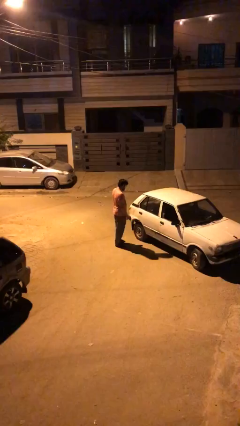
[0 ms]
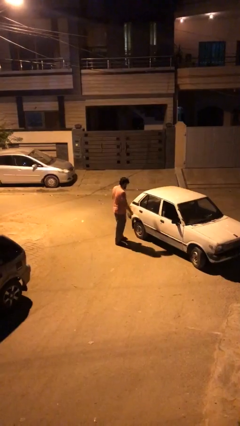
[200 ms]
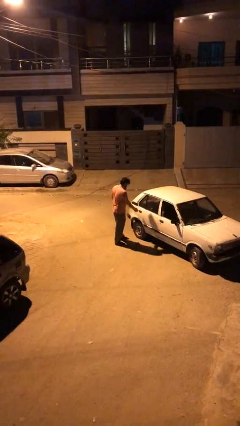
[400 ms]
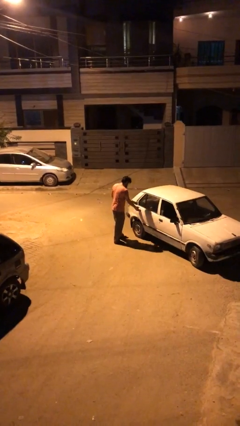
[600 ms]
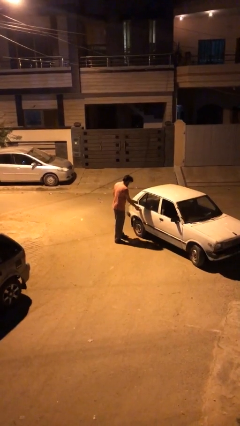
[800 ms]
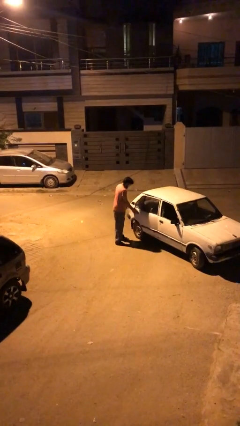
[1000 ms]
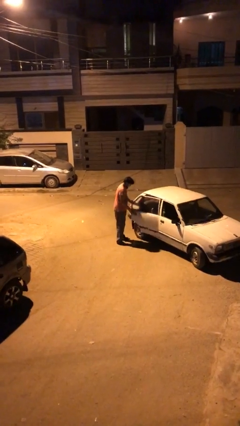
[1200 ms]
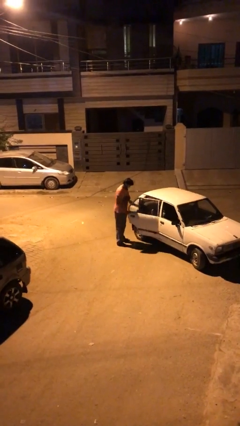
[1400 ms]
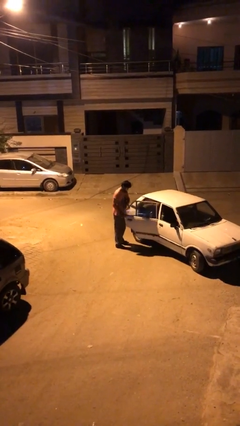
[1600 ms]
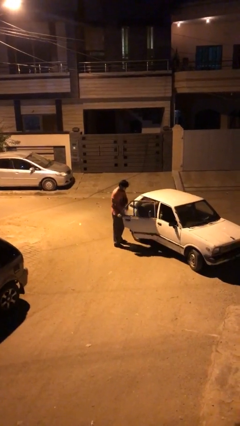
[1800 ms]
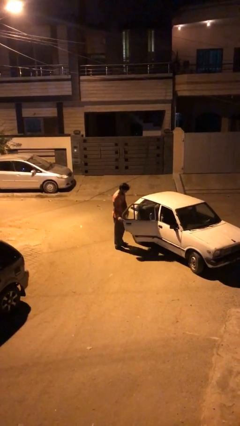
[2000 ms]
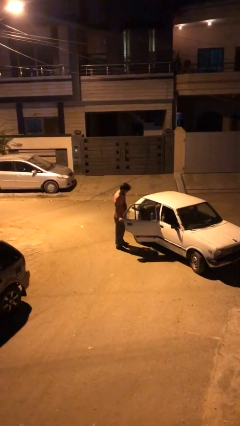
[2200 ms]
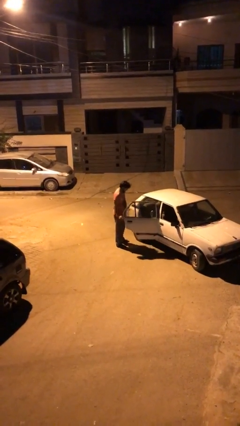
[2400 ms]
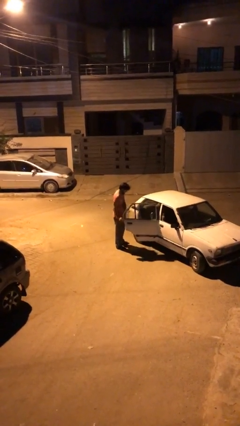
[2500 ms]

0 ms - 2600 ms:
person opens car door

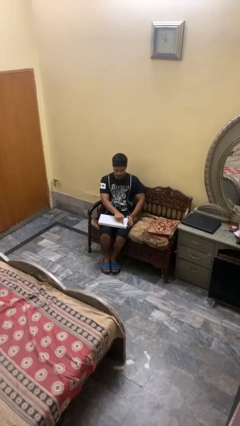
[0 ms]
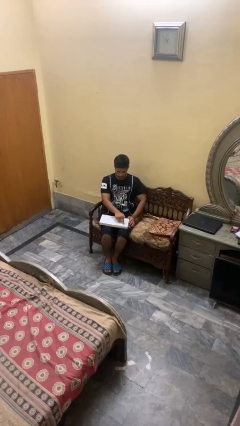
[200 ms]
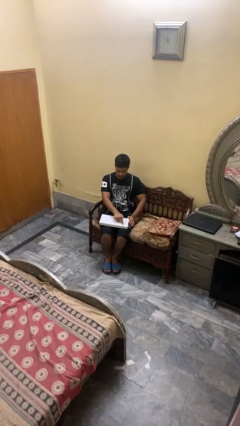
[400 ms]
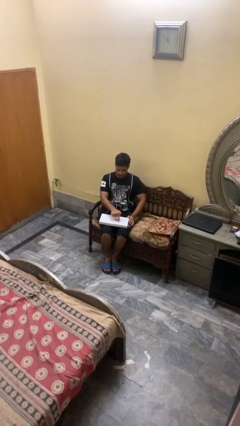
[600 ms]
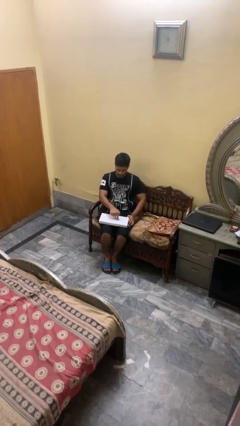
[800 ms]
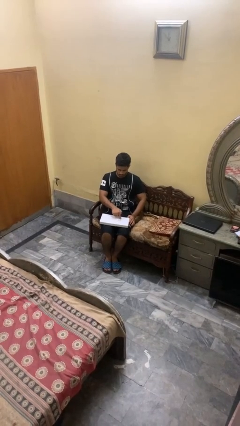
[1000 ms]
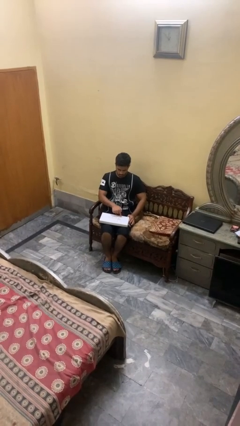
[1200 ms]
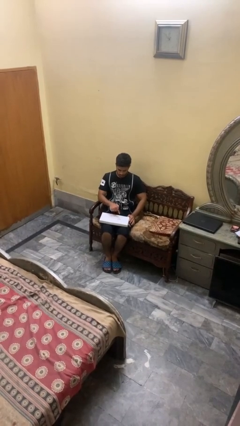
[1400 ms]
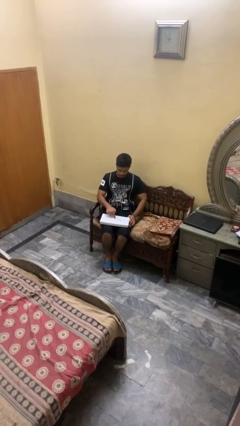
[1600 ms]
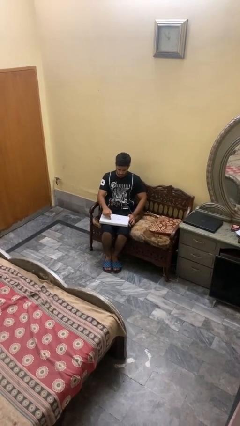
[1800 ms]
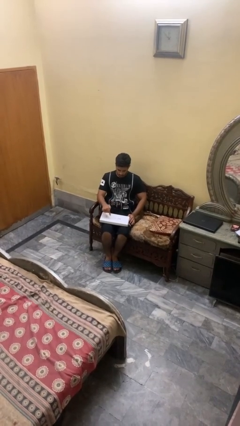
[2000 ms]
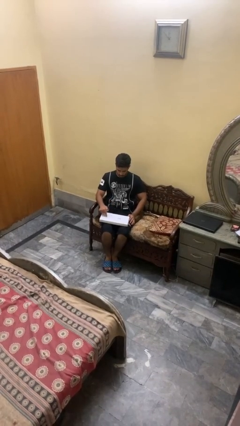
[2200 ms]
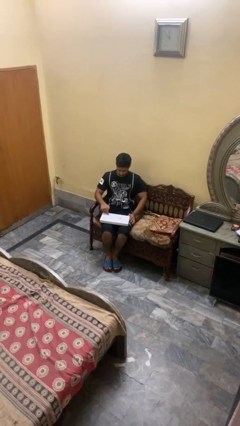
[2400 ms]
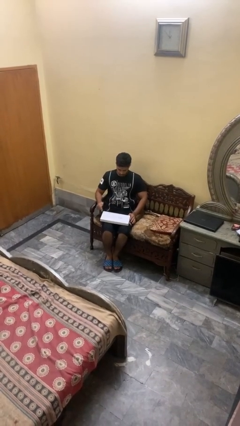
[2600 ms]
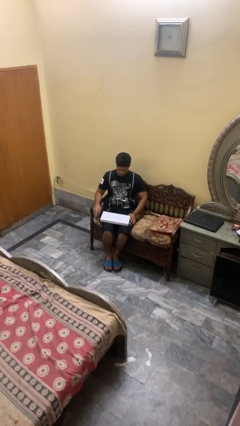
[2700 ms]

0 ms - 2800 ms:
person taps object with finger

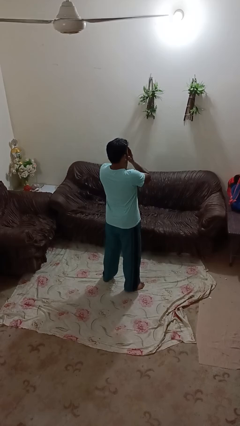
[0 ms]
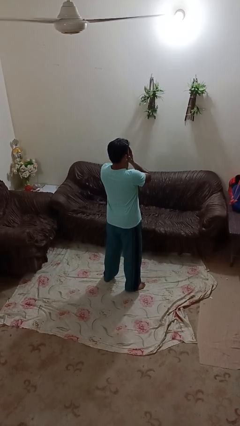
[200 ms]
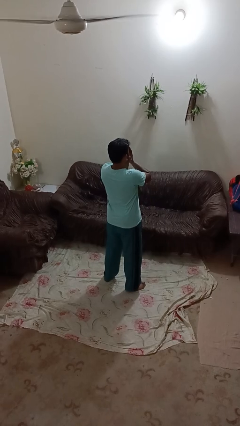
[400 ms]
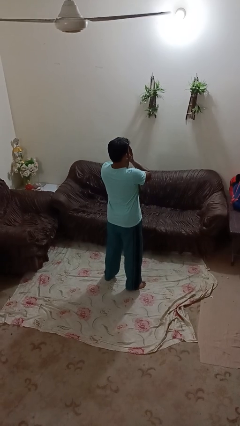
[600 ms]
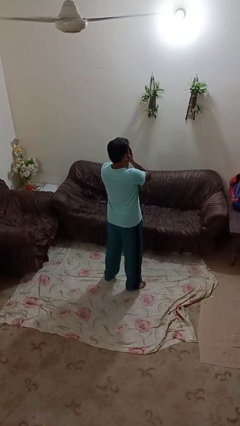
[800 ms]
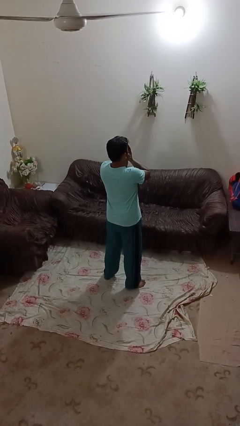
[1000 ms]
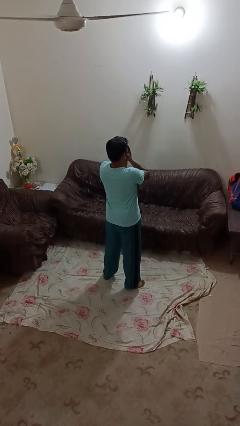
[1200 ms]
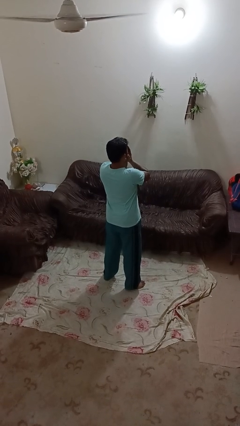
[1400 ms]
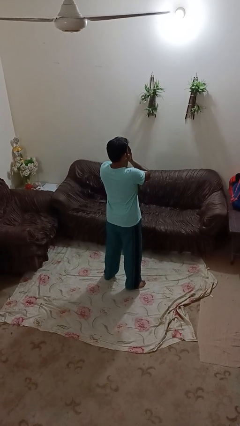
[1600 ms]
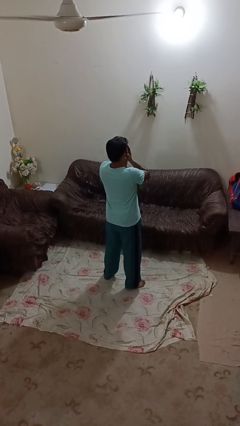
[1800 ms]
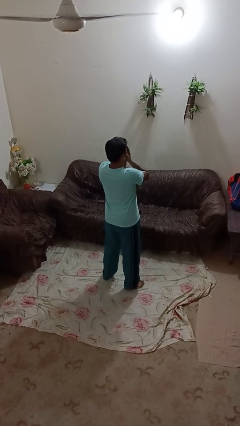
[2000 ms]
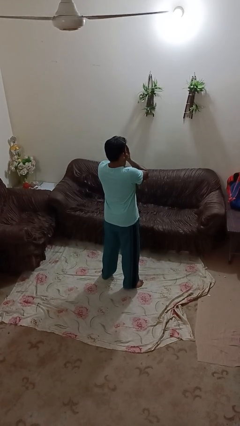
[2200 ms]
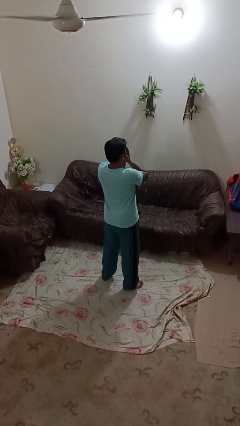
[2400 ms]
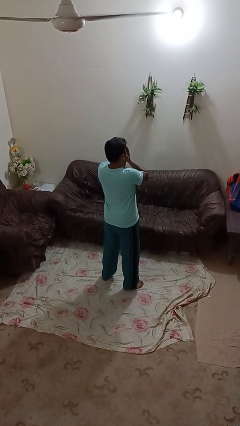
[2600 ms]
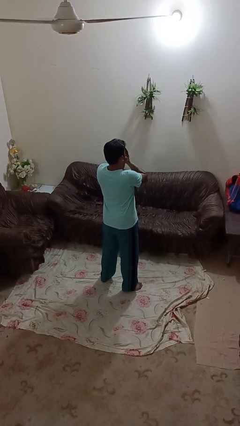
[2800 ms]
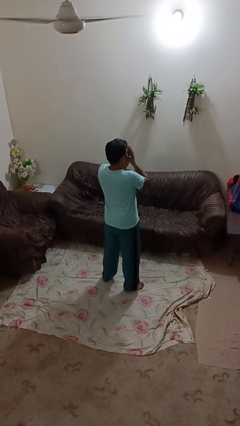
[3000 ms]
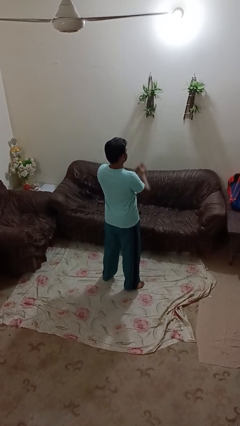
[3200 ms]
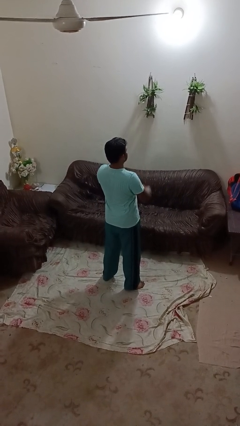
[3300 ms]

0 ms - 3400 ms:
person covers face with hands

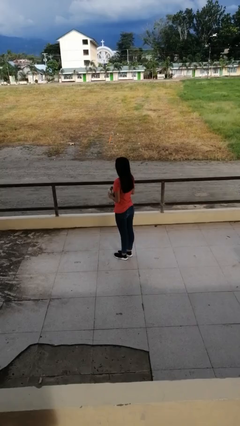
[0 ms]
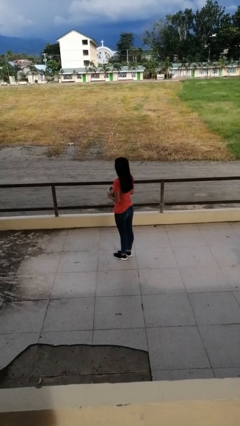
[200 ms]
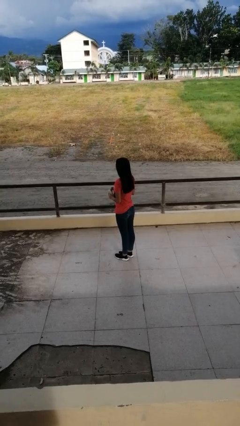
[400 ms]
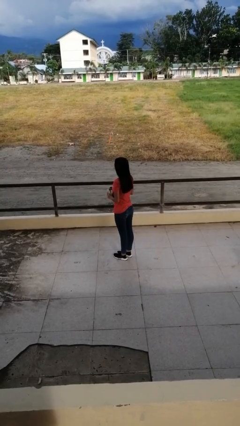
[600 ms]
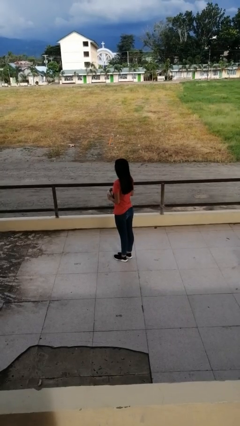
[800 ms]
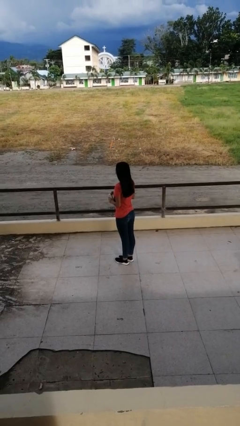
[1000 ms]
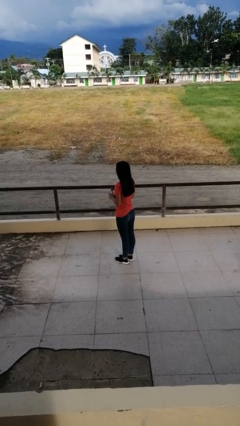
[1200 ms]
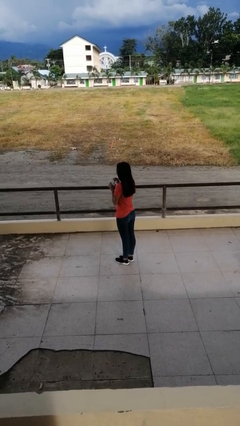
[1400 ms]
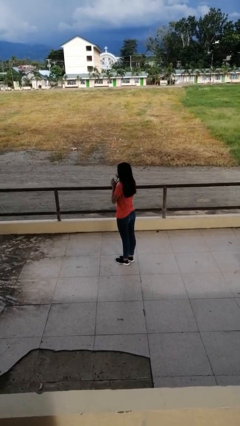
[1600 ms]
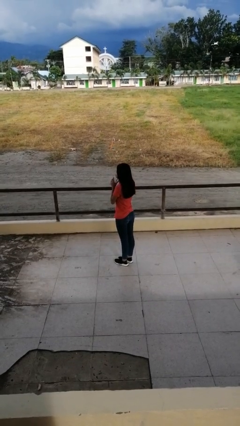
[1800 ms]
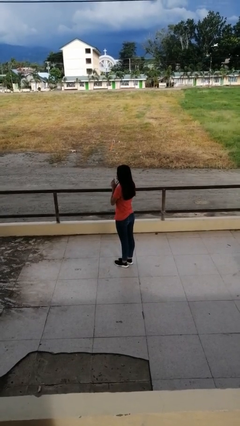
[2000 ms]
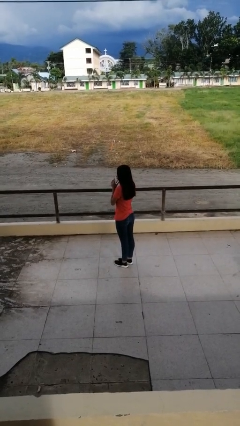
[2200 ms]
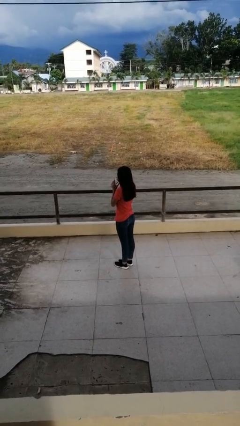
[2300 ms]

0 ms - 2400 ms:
person drinks from straw

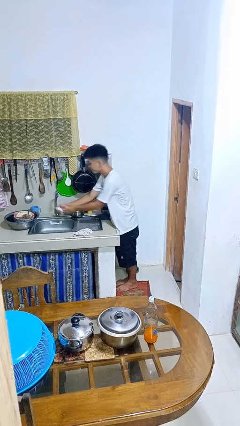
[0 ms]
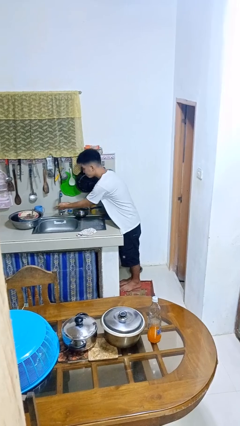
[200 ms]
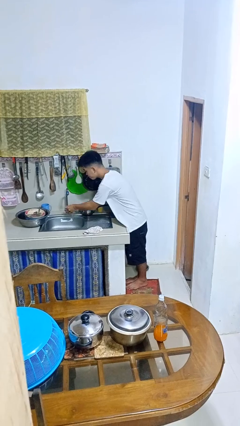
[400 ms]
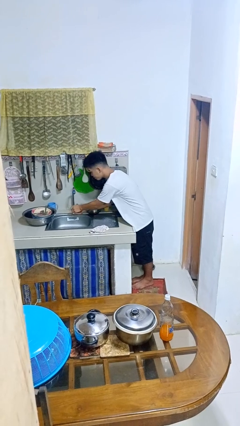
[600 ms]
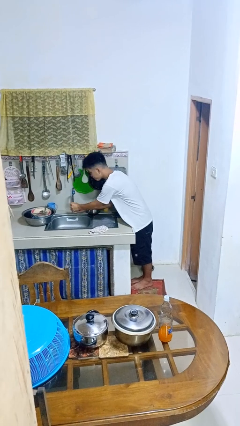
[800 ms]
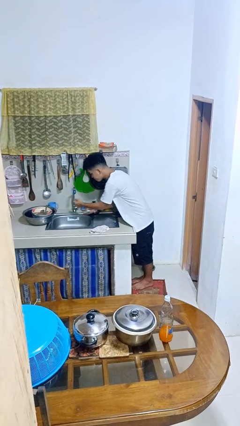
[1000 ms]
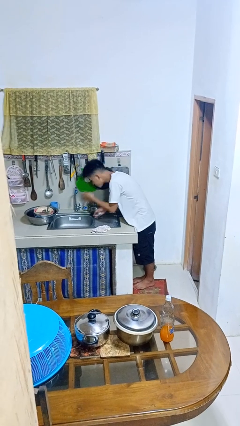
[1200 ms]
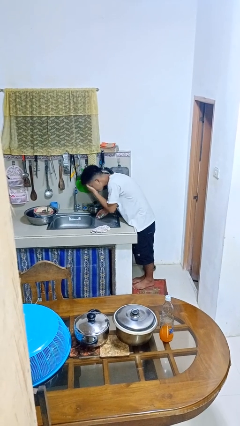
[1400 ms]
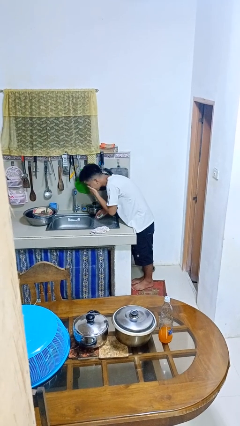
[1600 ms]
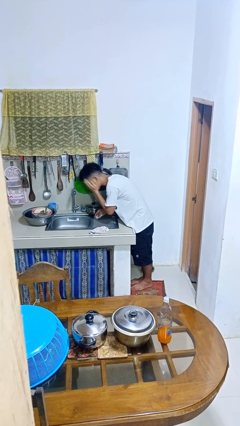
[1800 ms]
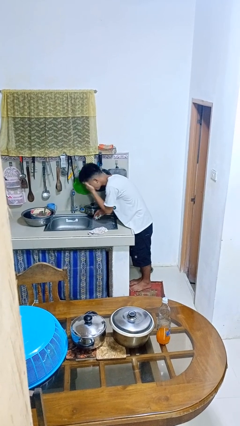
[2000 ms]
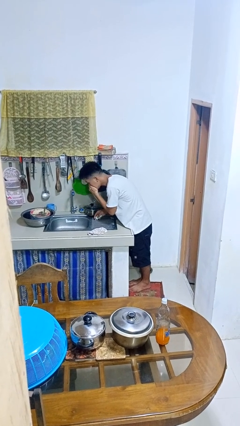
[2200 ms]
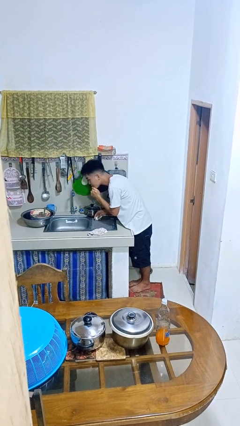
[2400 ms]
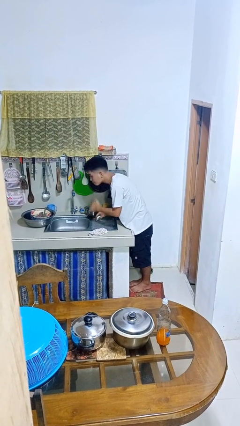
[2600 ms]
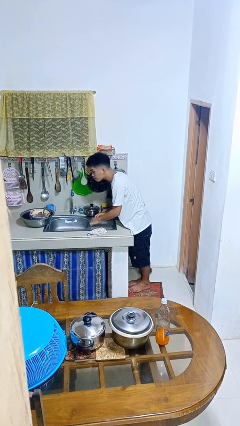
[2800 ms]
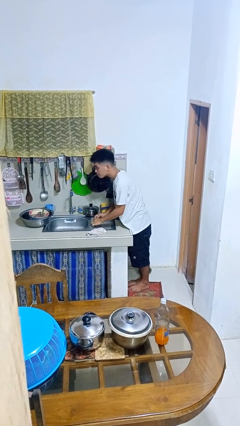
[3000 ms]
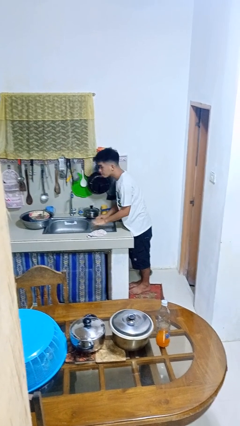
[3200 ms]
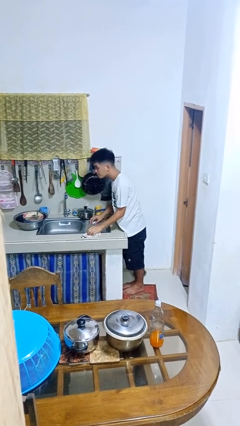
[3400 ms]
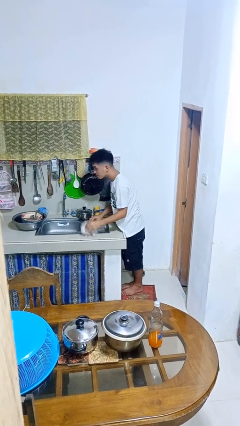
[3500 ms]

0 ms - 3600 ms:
person washes face

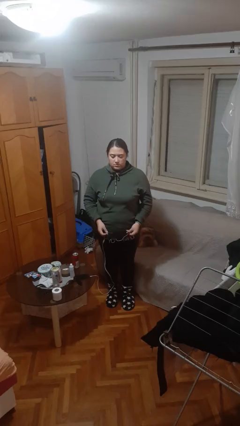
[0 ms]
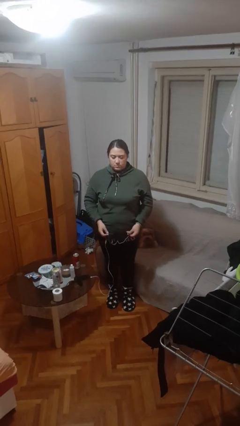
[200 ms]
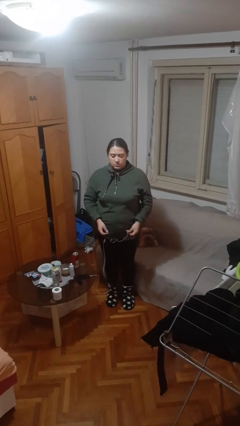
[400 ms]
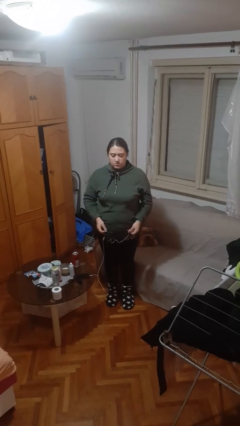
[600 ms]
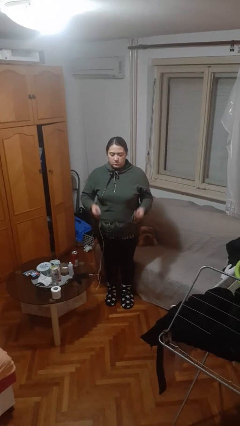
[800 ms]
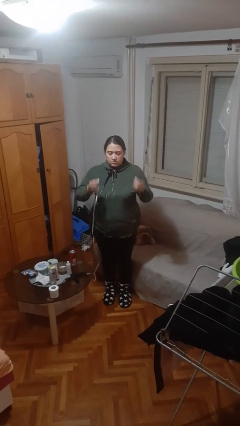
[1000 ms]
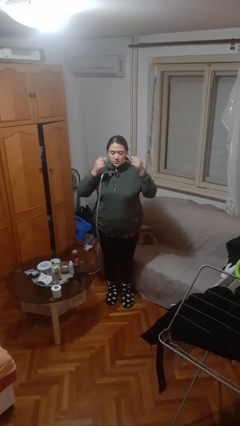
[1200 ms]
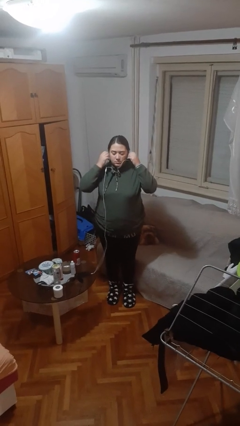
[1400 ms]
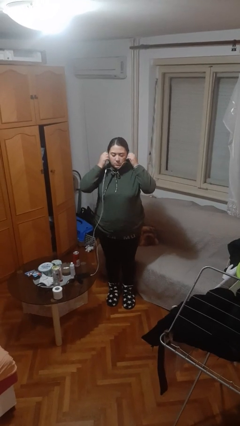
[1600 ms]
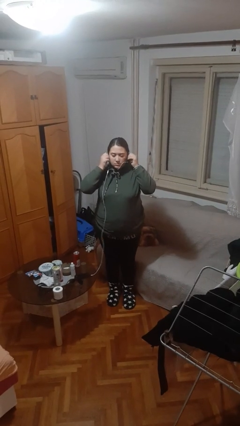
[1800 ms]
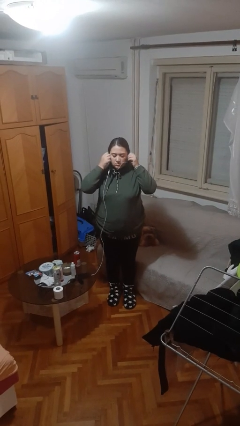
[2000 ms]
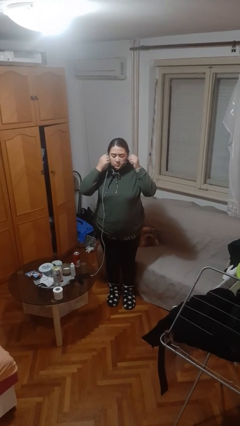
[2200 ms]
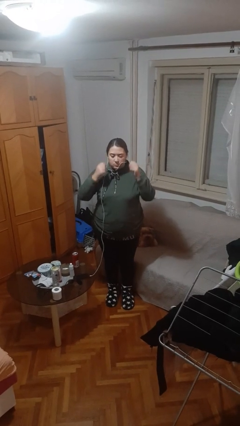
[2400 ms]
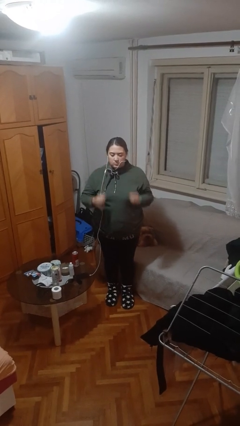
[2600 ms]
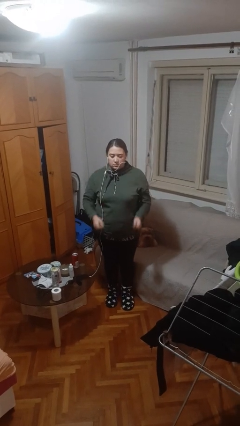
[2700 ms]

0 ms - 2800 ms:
person puts on headphones
